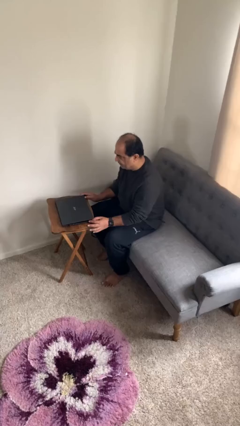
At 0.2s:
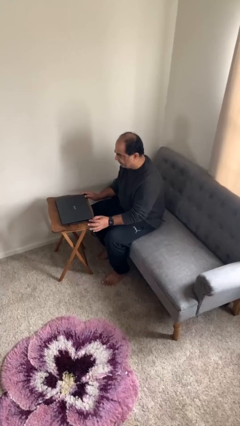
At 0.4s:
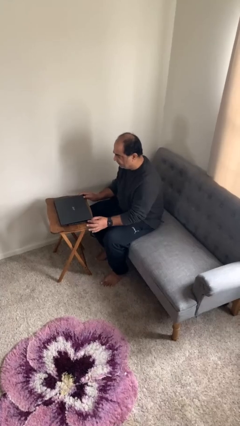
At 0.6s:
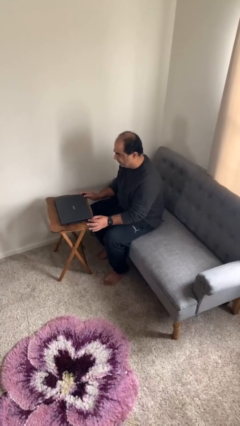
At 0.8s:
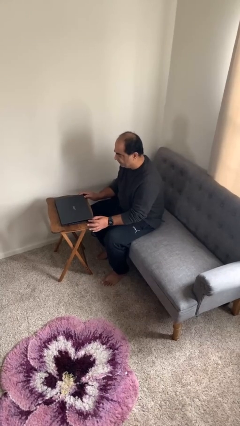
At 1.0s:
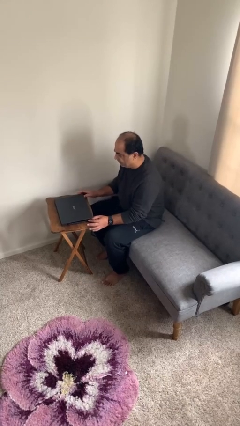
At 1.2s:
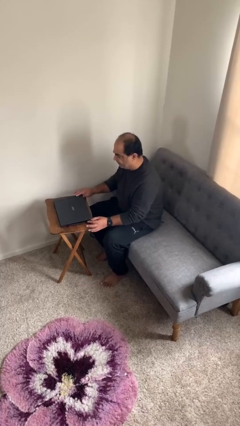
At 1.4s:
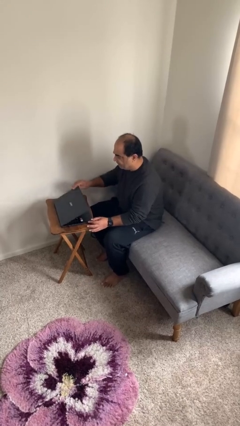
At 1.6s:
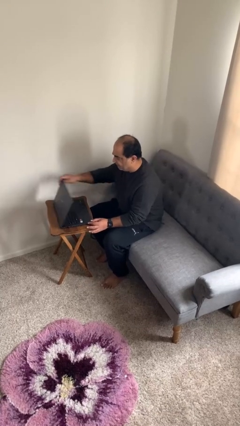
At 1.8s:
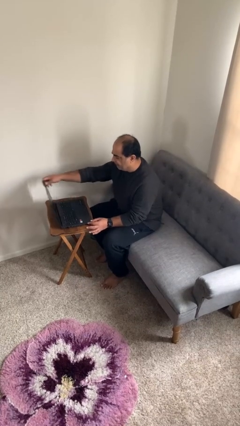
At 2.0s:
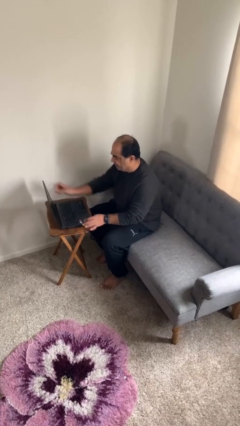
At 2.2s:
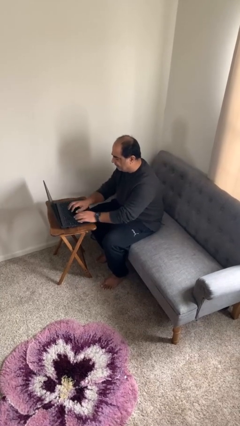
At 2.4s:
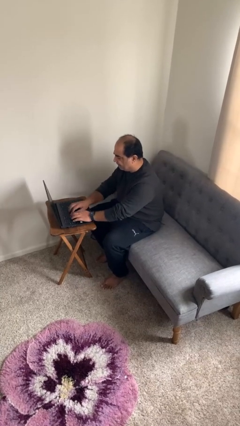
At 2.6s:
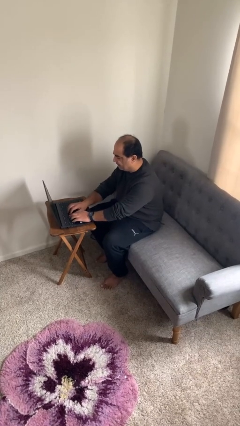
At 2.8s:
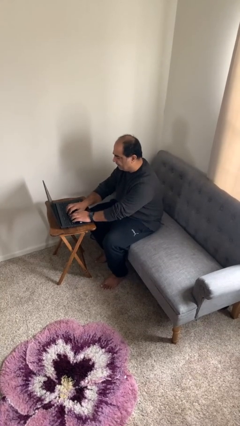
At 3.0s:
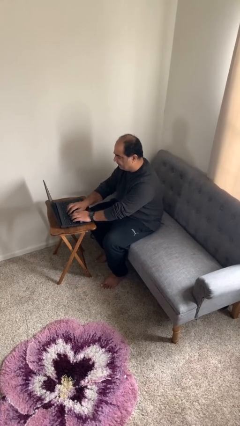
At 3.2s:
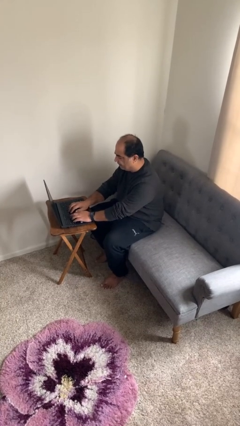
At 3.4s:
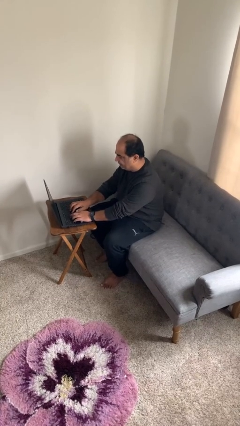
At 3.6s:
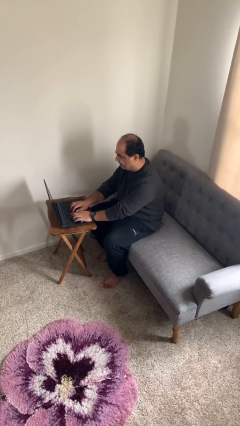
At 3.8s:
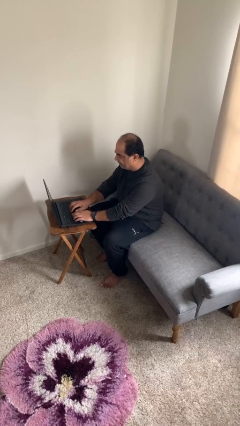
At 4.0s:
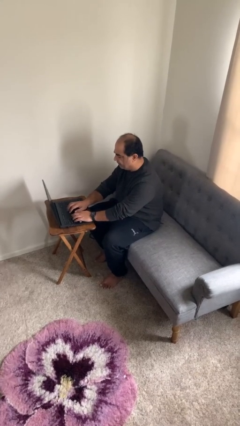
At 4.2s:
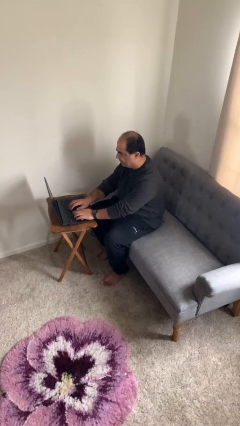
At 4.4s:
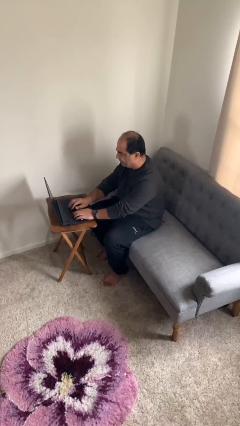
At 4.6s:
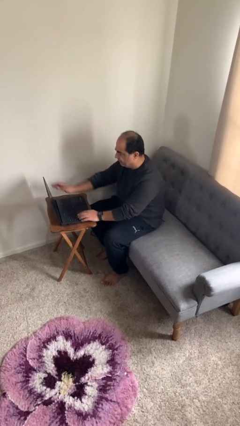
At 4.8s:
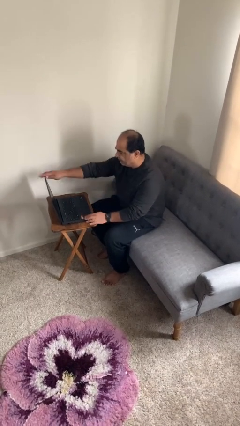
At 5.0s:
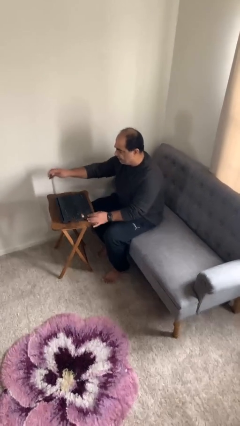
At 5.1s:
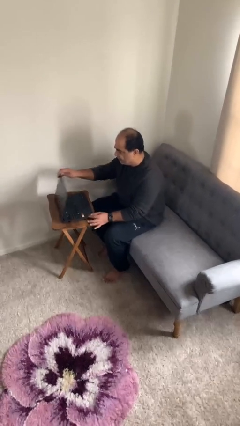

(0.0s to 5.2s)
person interacts with laptop

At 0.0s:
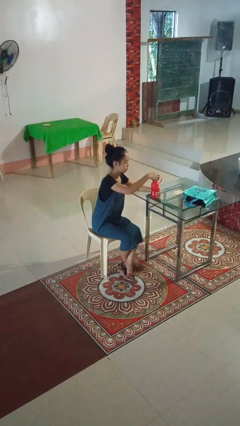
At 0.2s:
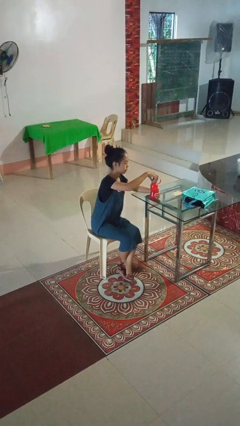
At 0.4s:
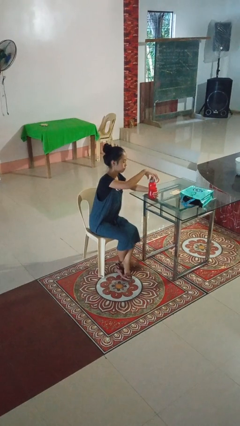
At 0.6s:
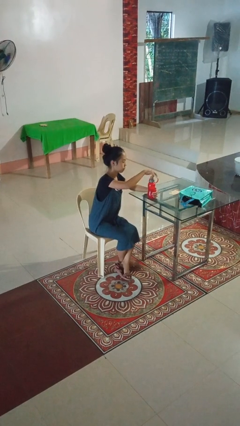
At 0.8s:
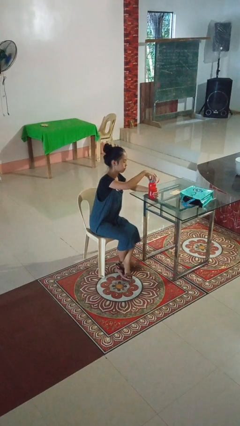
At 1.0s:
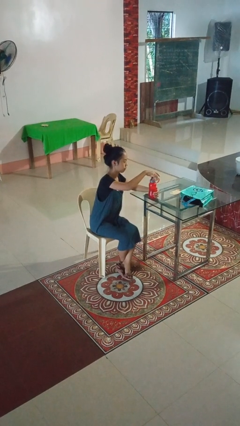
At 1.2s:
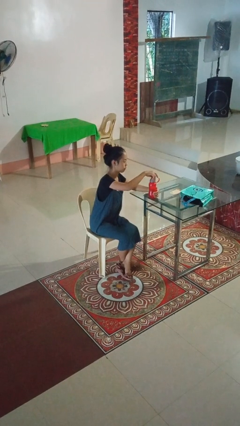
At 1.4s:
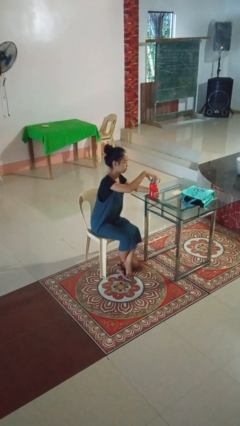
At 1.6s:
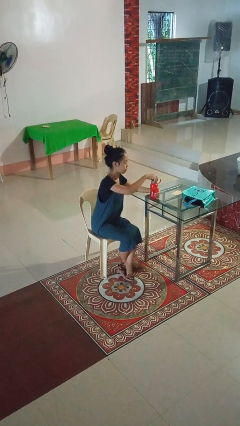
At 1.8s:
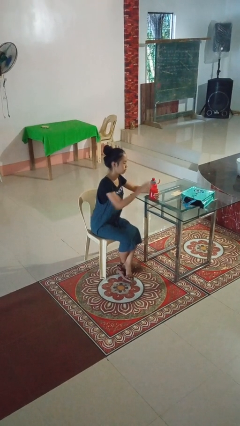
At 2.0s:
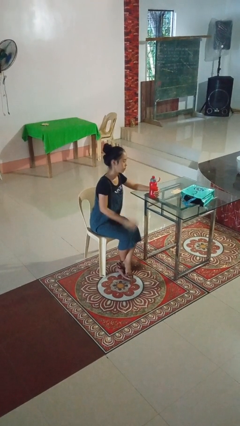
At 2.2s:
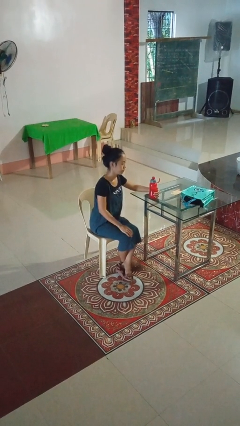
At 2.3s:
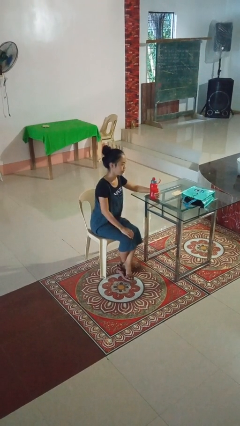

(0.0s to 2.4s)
person screws lid to bottle

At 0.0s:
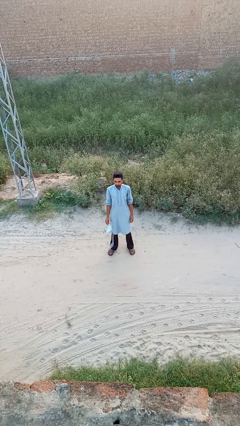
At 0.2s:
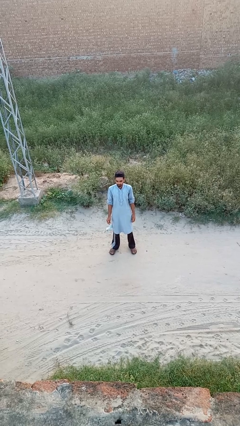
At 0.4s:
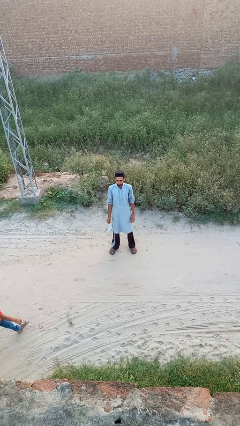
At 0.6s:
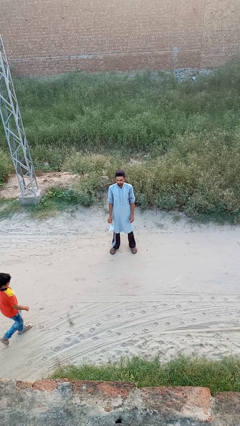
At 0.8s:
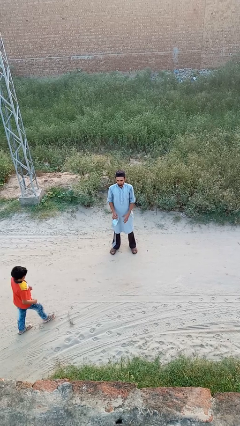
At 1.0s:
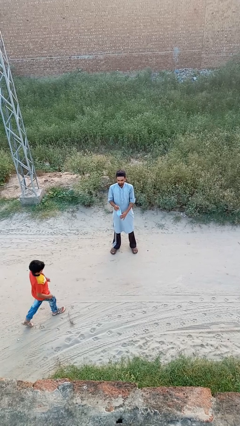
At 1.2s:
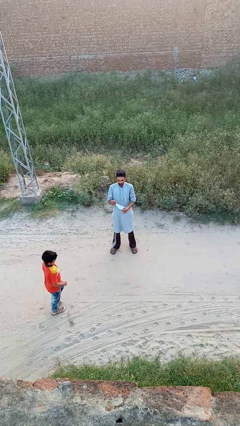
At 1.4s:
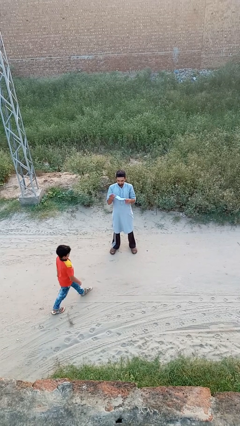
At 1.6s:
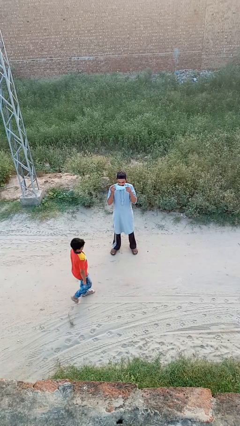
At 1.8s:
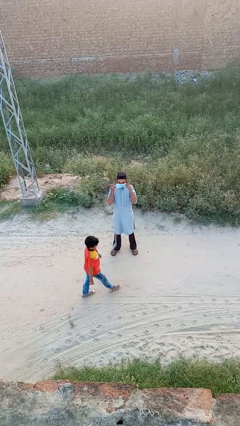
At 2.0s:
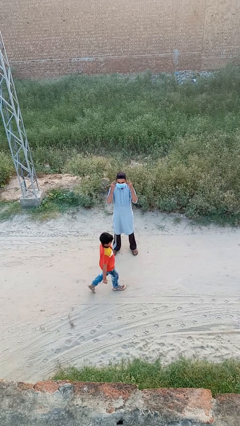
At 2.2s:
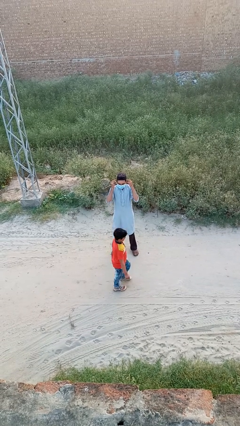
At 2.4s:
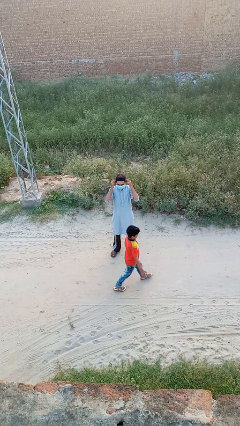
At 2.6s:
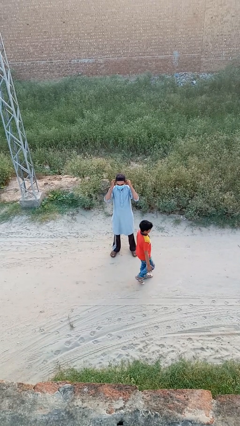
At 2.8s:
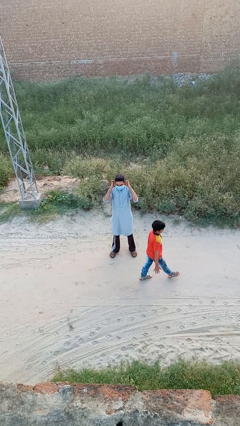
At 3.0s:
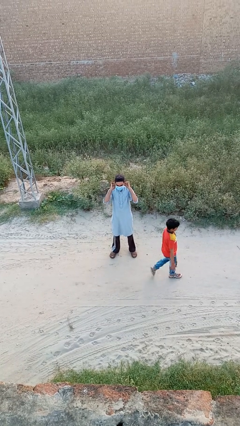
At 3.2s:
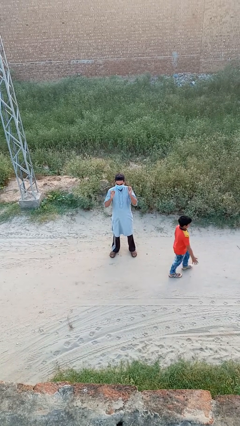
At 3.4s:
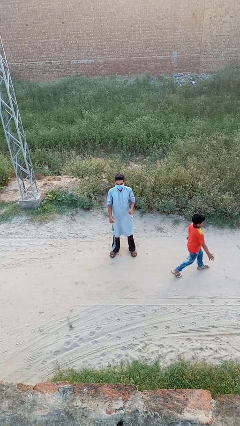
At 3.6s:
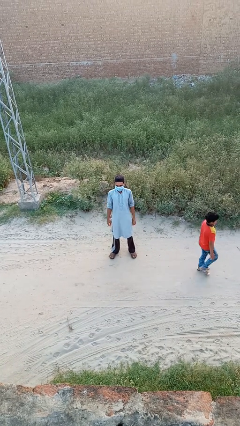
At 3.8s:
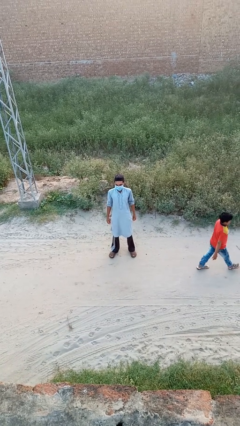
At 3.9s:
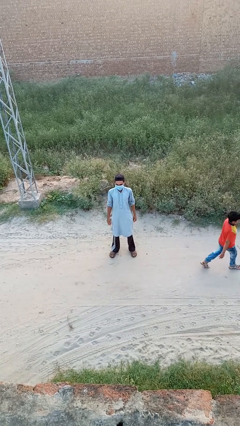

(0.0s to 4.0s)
person puts on facemask

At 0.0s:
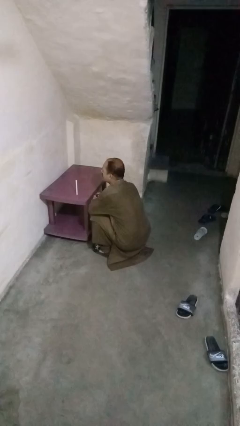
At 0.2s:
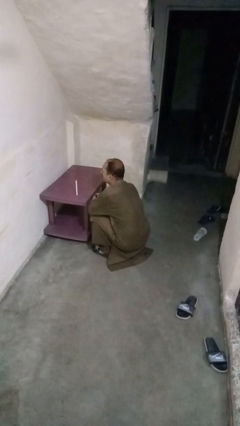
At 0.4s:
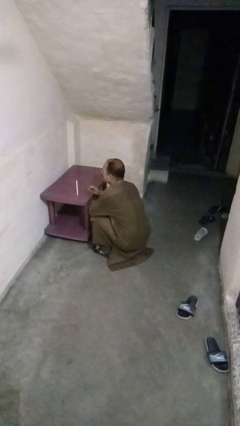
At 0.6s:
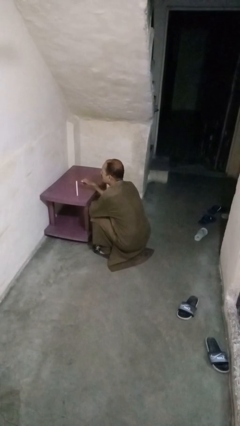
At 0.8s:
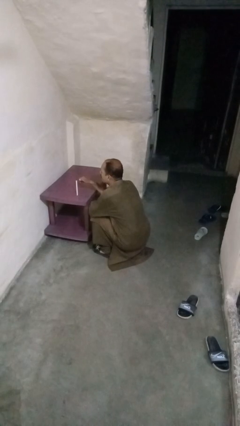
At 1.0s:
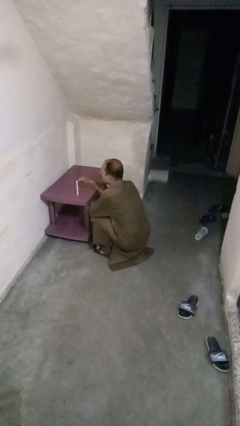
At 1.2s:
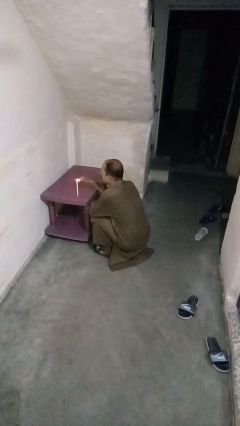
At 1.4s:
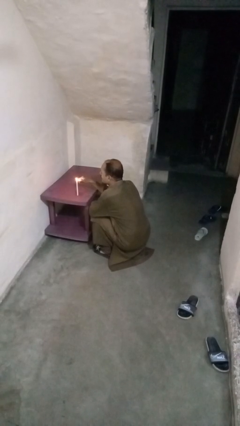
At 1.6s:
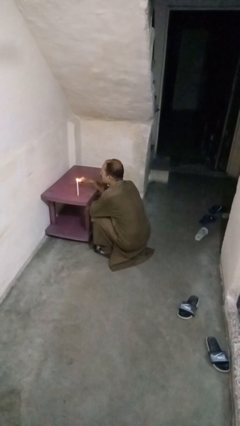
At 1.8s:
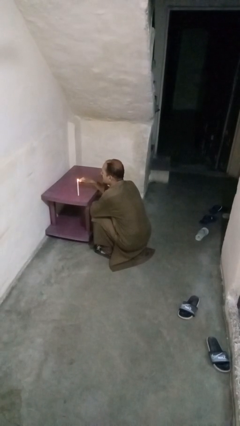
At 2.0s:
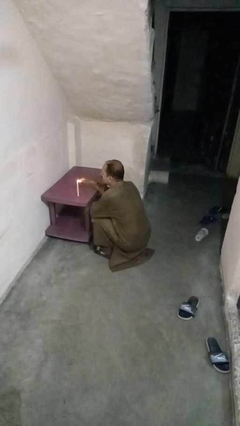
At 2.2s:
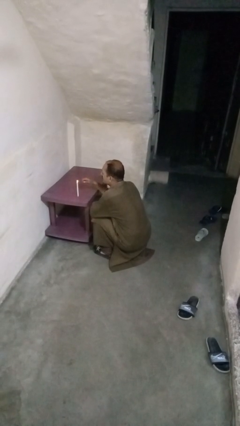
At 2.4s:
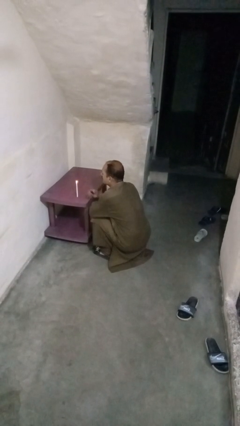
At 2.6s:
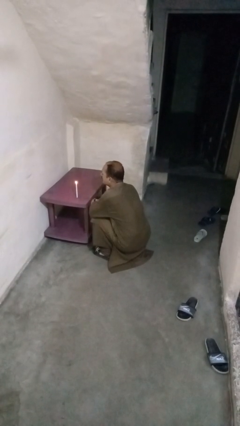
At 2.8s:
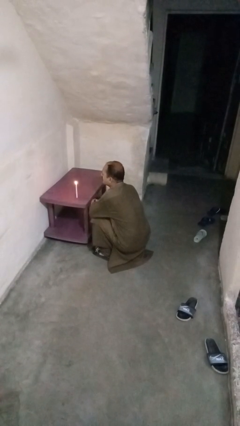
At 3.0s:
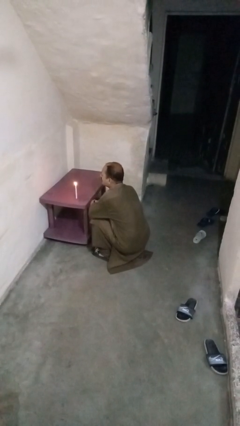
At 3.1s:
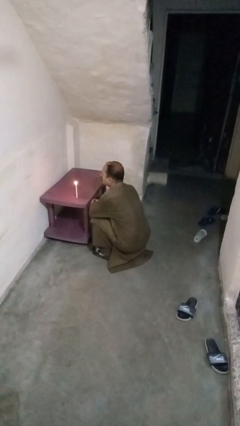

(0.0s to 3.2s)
person lights candle

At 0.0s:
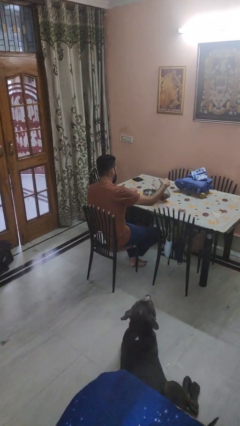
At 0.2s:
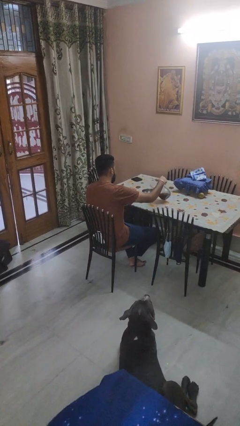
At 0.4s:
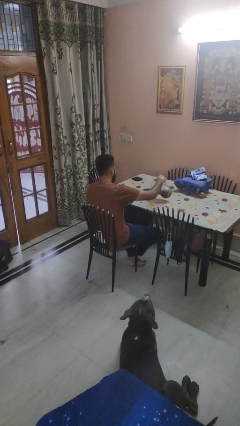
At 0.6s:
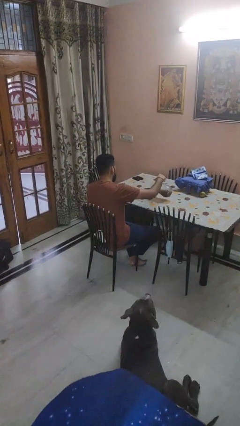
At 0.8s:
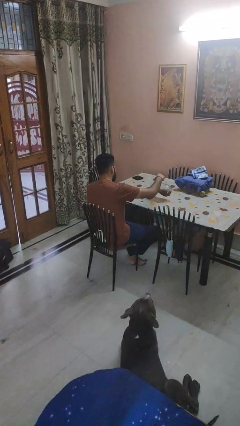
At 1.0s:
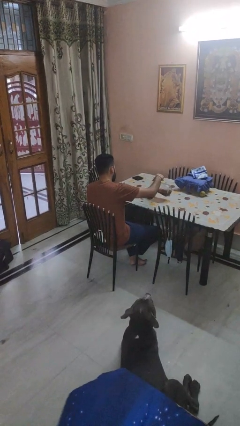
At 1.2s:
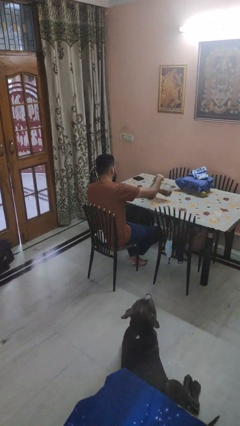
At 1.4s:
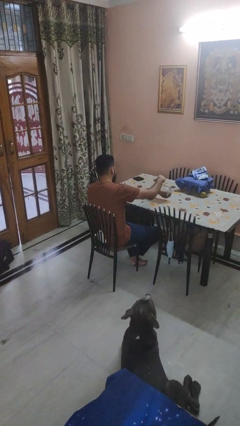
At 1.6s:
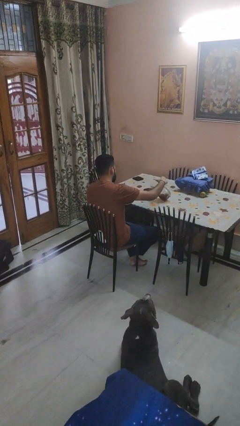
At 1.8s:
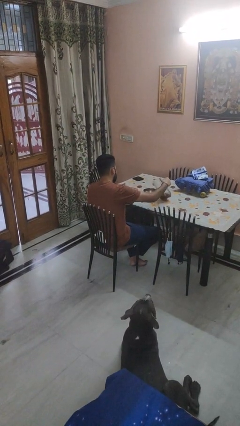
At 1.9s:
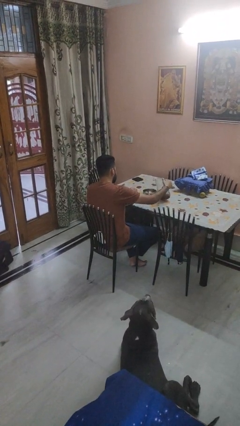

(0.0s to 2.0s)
person pours into bowl

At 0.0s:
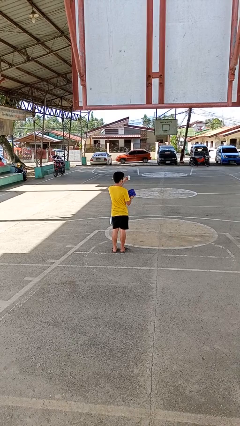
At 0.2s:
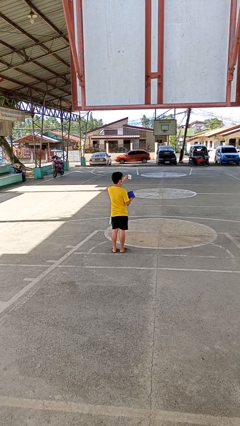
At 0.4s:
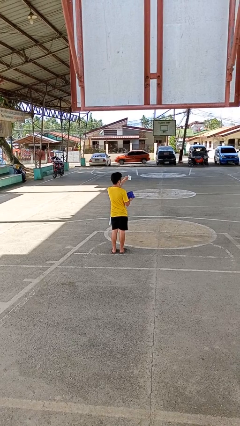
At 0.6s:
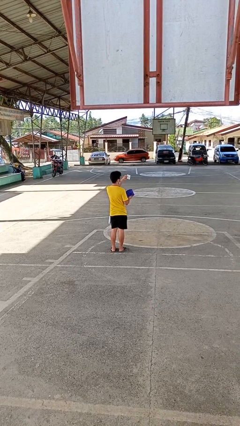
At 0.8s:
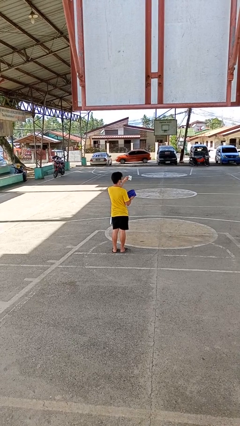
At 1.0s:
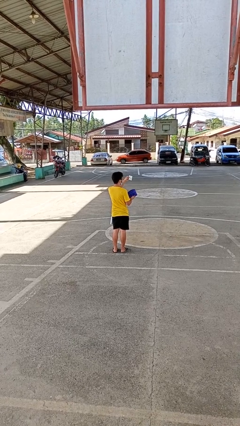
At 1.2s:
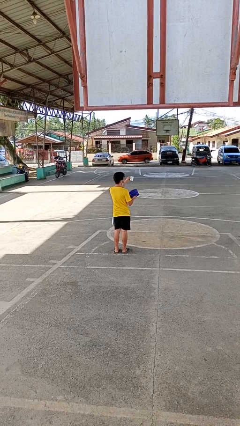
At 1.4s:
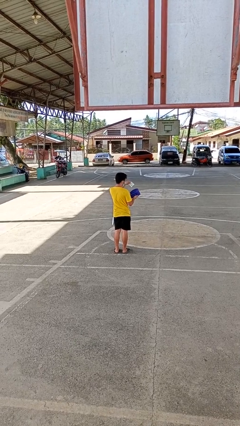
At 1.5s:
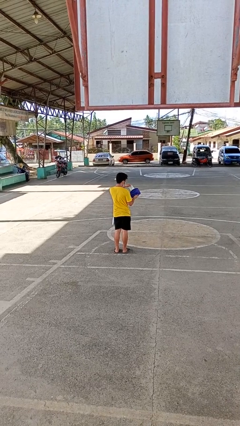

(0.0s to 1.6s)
person takes object from purse
